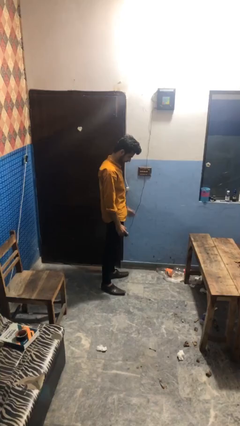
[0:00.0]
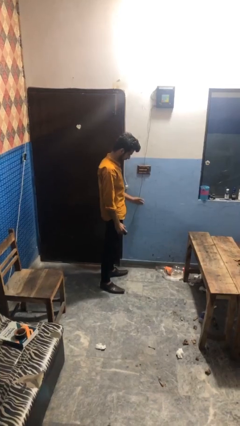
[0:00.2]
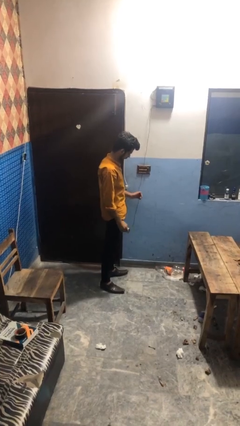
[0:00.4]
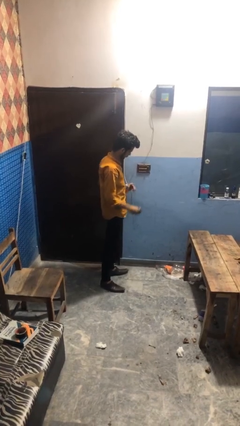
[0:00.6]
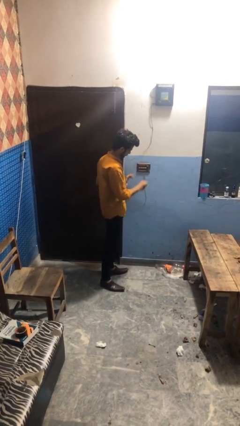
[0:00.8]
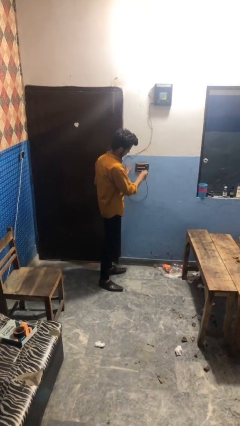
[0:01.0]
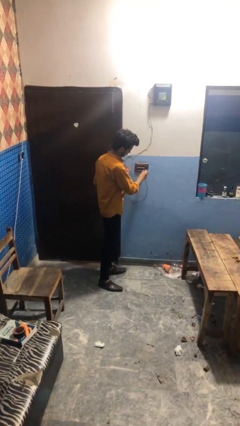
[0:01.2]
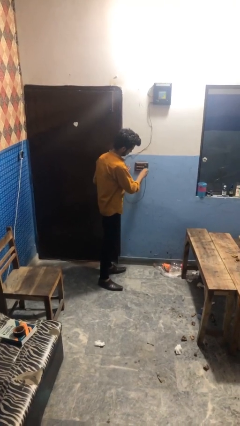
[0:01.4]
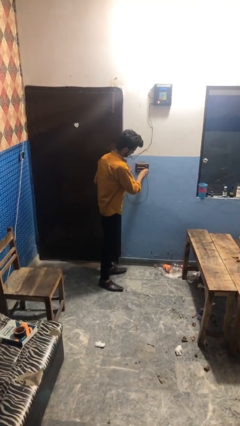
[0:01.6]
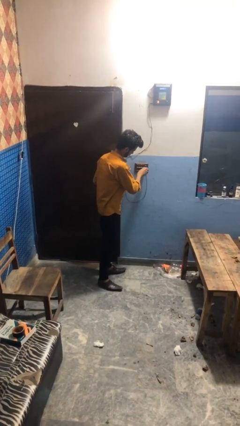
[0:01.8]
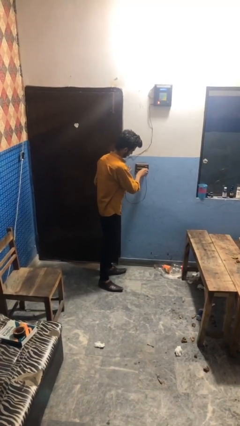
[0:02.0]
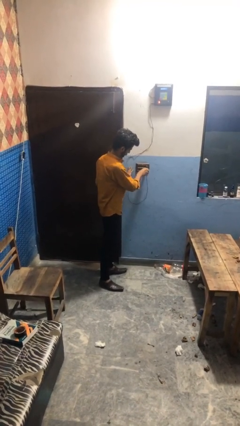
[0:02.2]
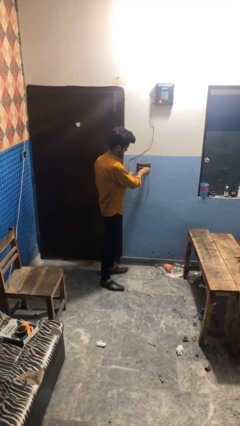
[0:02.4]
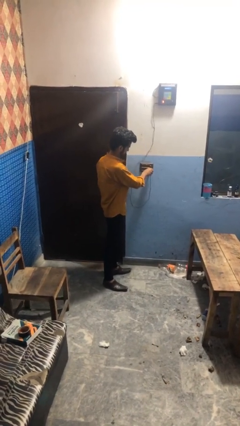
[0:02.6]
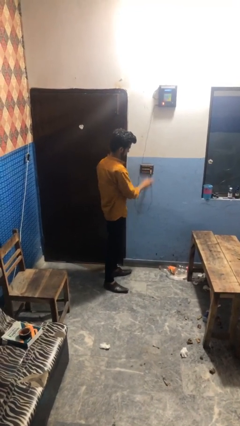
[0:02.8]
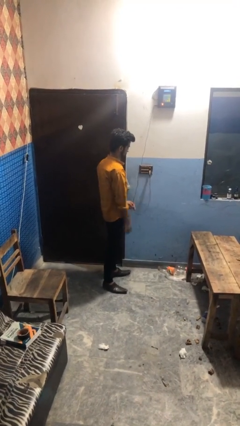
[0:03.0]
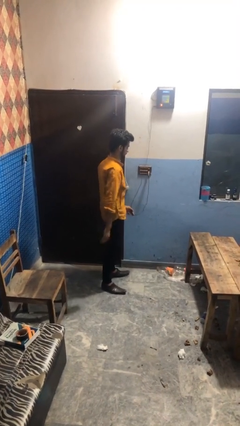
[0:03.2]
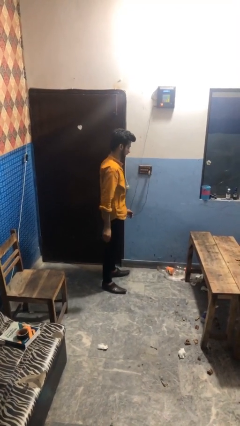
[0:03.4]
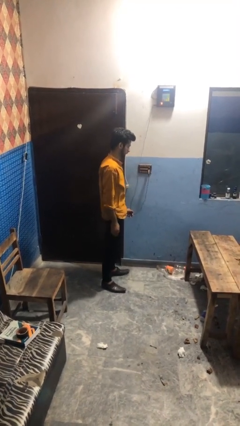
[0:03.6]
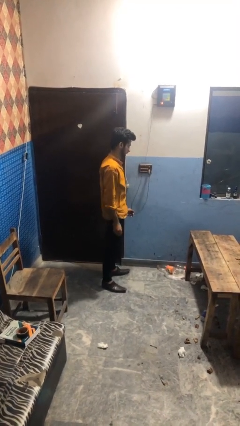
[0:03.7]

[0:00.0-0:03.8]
person plugs into electrical socket

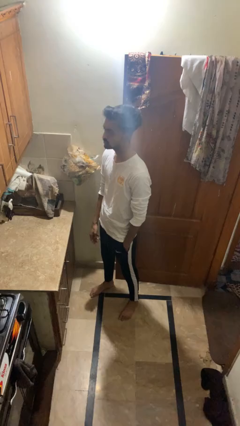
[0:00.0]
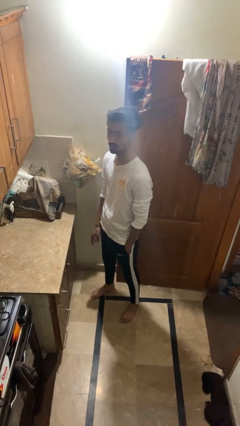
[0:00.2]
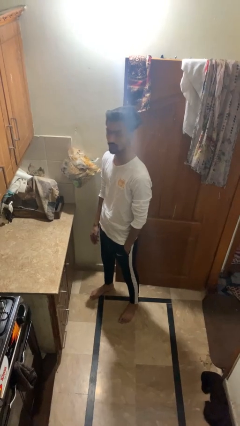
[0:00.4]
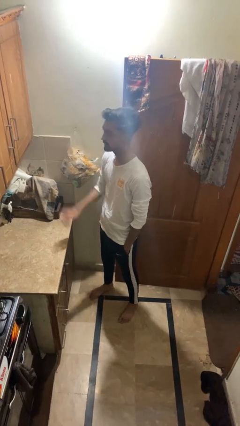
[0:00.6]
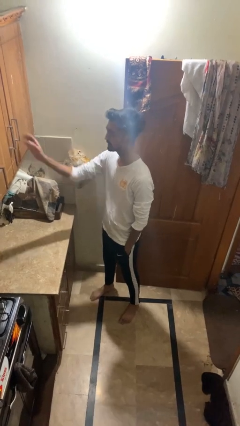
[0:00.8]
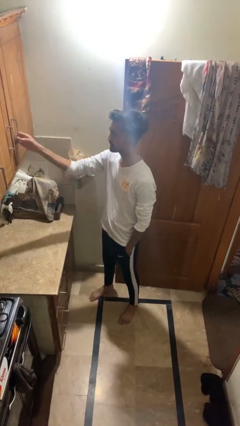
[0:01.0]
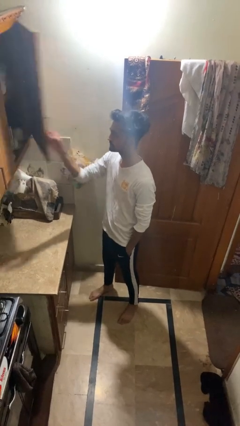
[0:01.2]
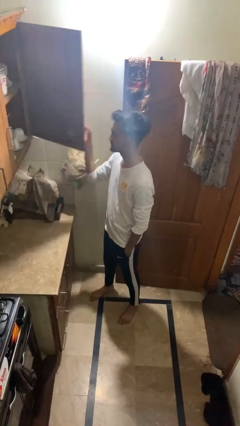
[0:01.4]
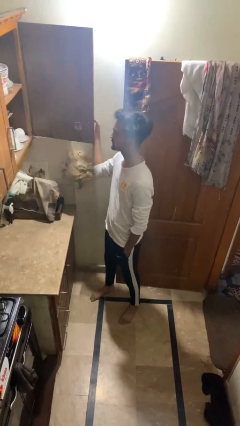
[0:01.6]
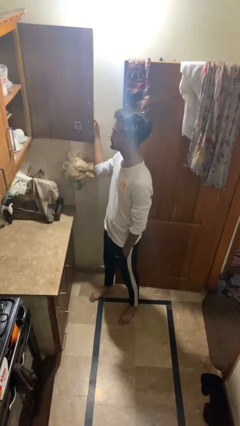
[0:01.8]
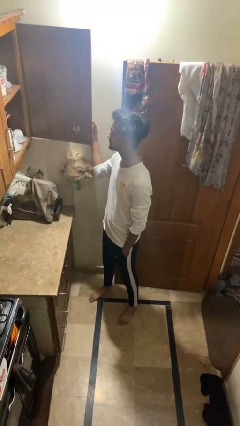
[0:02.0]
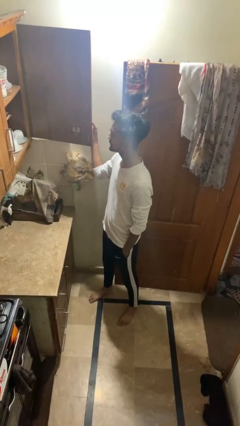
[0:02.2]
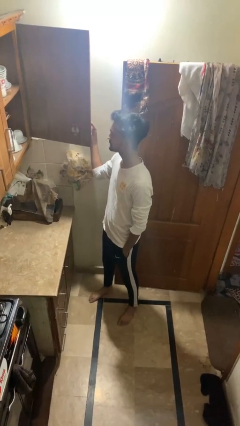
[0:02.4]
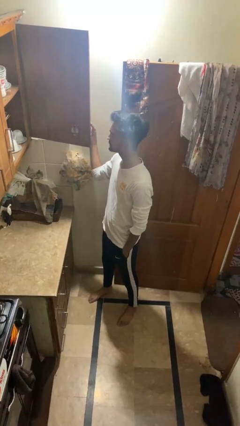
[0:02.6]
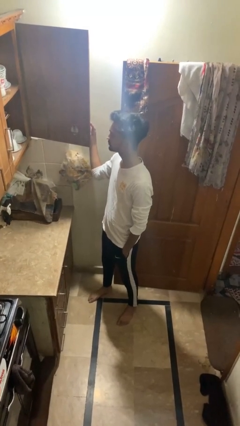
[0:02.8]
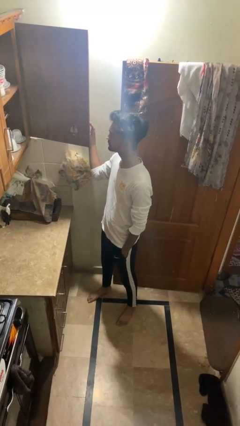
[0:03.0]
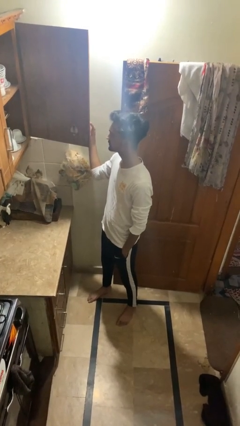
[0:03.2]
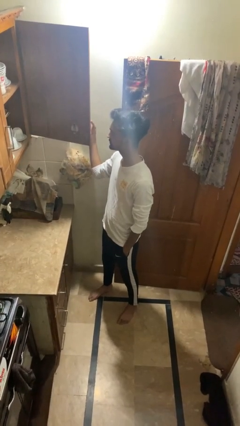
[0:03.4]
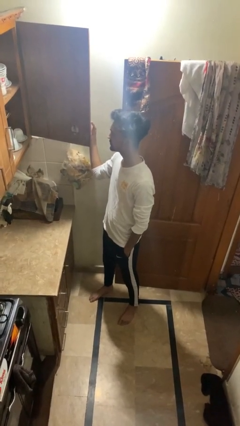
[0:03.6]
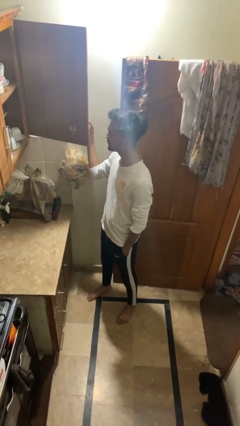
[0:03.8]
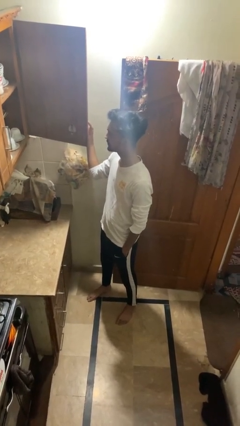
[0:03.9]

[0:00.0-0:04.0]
person opens cabinet

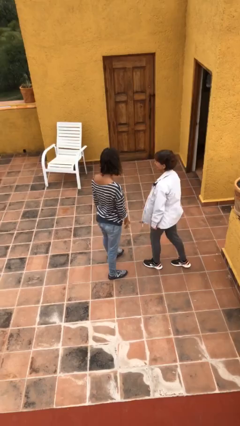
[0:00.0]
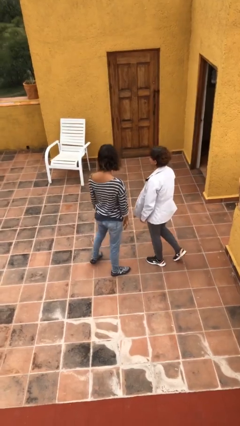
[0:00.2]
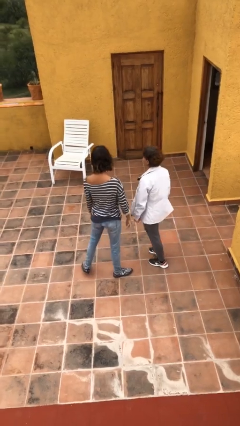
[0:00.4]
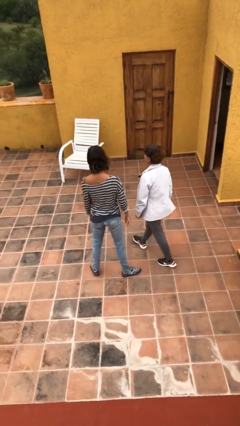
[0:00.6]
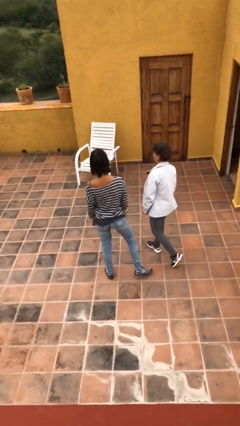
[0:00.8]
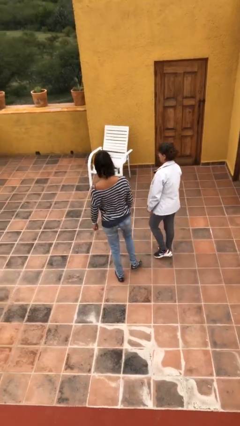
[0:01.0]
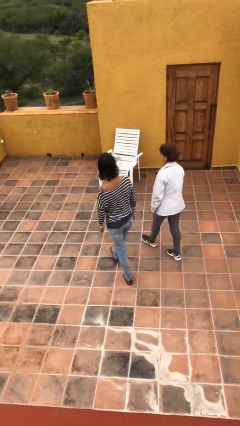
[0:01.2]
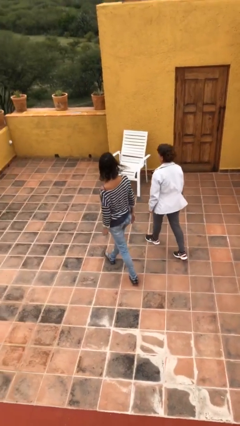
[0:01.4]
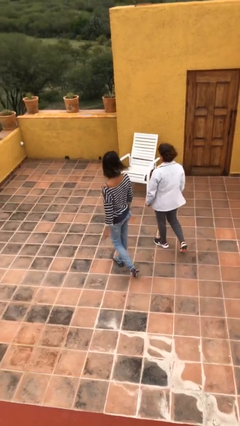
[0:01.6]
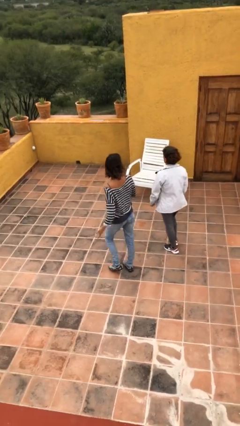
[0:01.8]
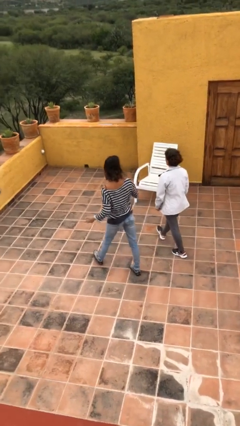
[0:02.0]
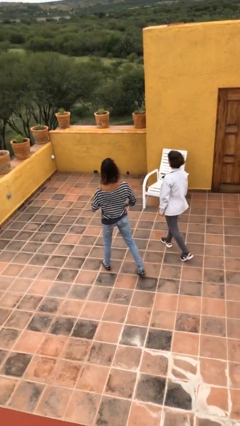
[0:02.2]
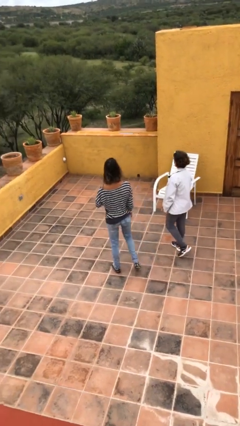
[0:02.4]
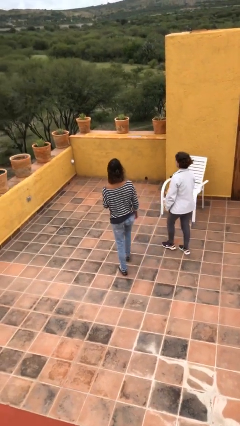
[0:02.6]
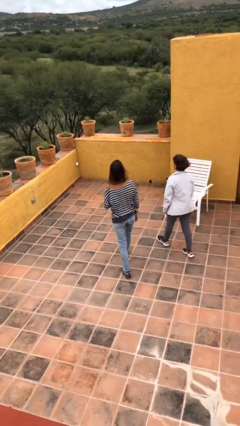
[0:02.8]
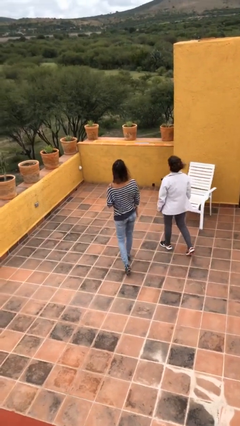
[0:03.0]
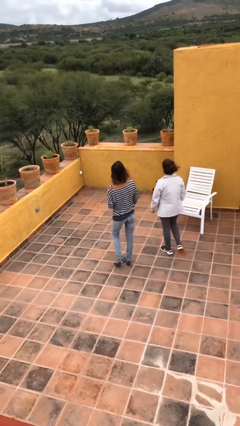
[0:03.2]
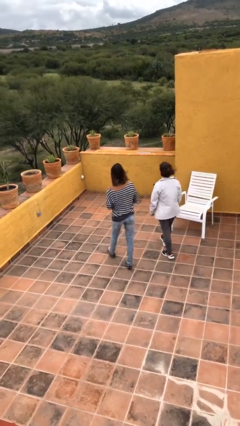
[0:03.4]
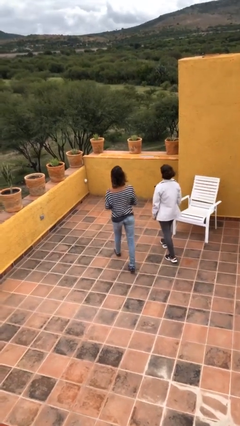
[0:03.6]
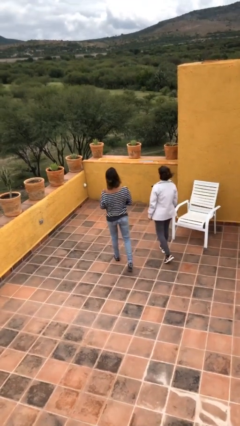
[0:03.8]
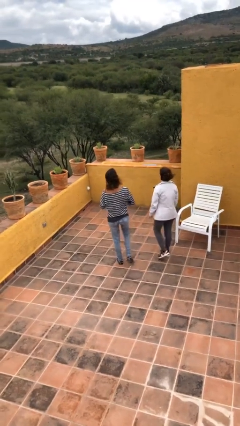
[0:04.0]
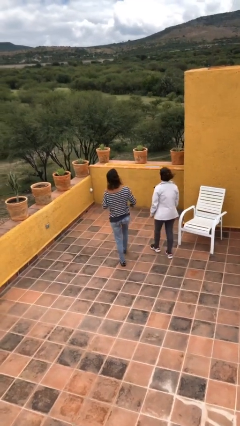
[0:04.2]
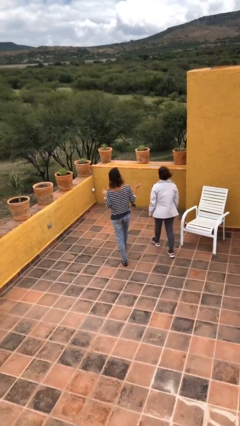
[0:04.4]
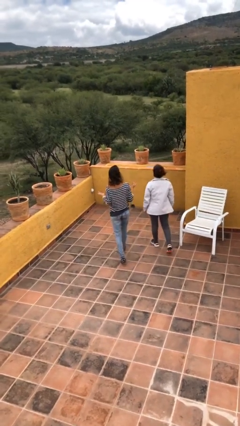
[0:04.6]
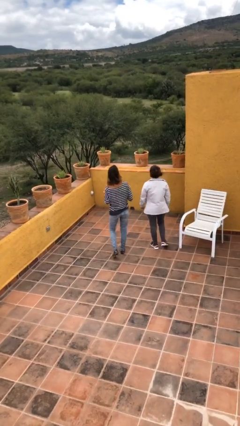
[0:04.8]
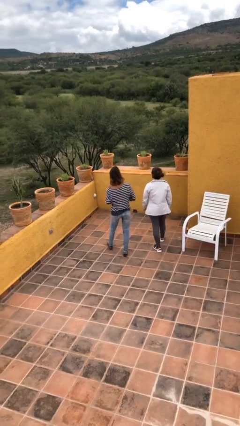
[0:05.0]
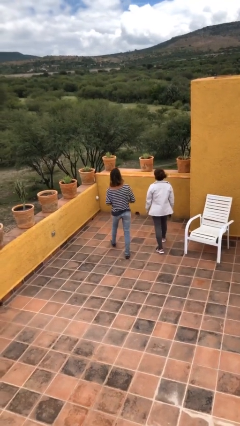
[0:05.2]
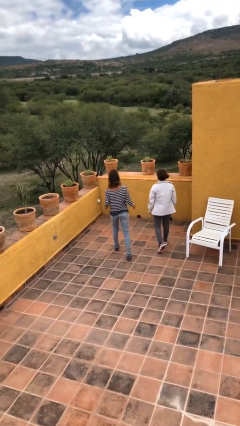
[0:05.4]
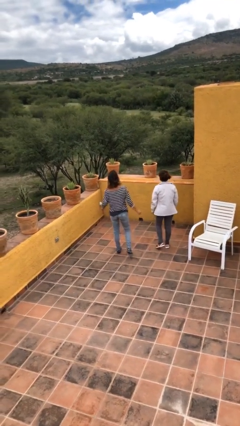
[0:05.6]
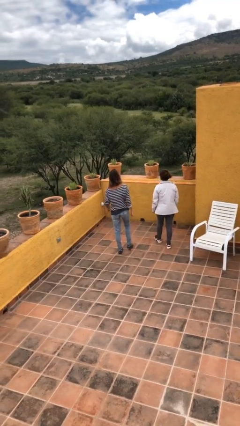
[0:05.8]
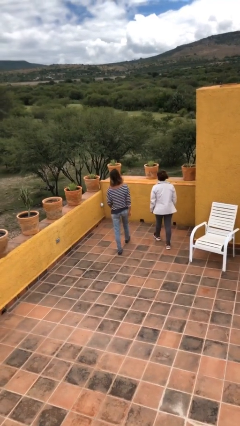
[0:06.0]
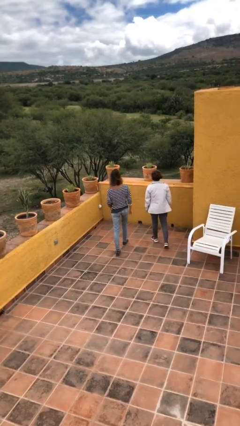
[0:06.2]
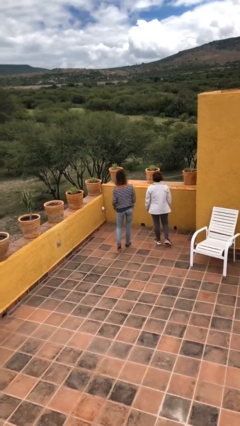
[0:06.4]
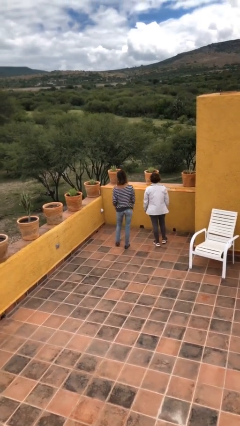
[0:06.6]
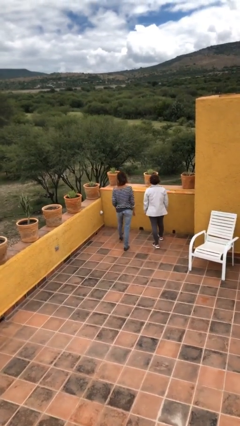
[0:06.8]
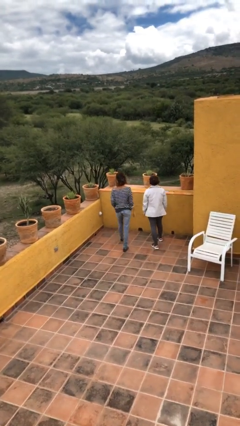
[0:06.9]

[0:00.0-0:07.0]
person talks to person

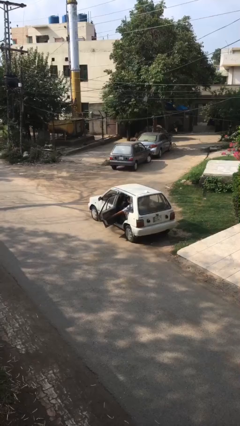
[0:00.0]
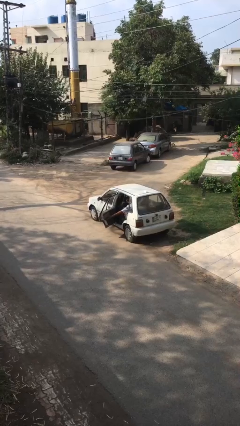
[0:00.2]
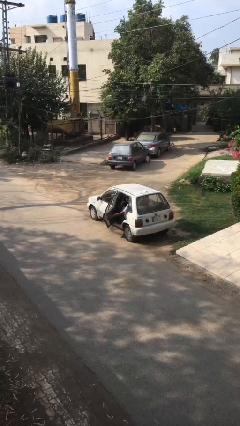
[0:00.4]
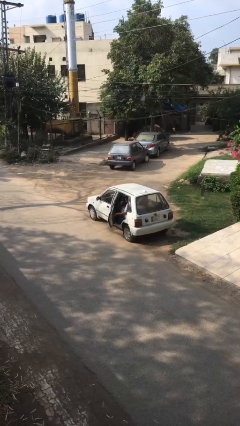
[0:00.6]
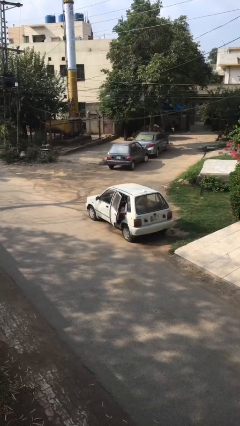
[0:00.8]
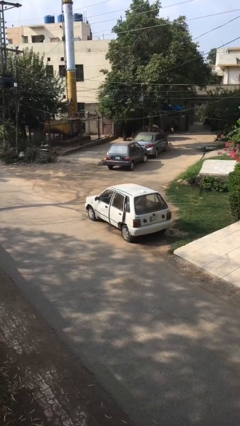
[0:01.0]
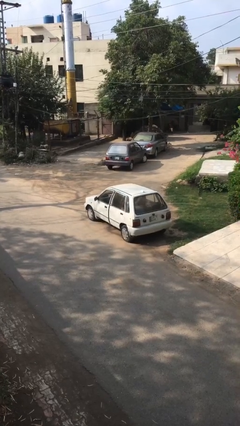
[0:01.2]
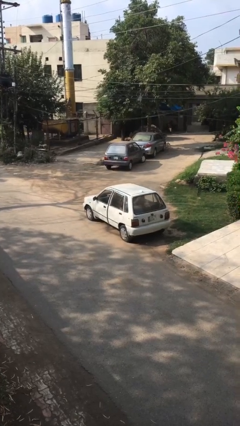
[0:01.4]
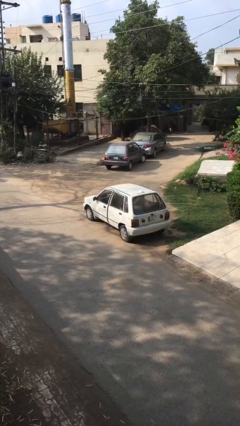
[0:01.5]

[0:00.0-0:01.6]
person closes car door

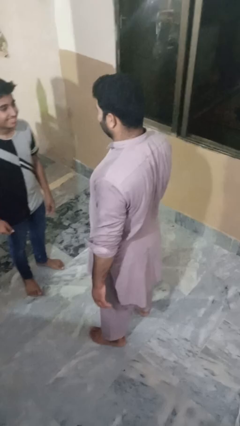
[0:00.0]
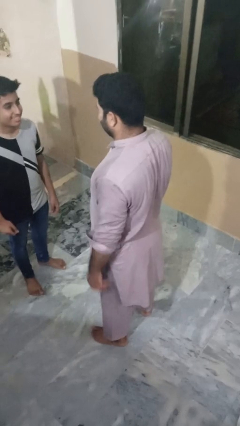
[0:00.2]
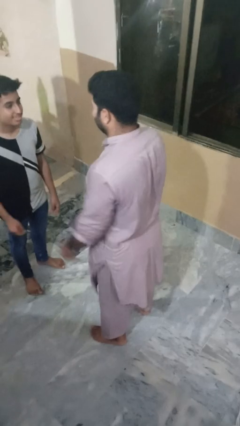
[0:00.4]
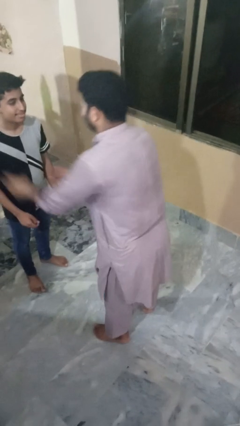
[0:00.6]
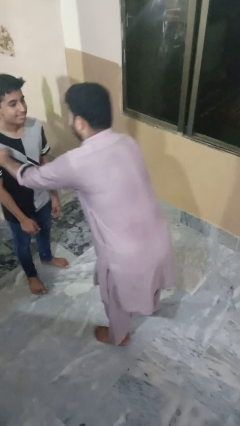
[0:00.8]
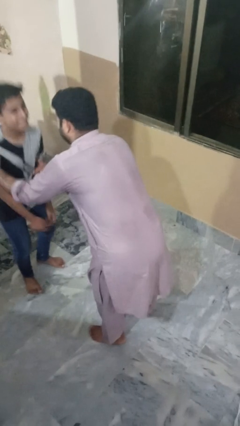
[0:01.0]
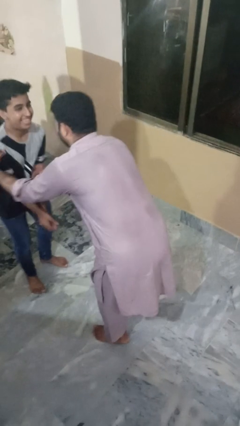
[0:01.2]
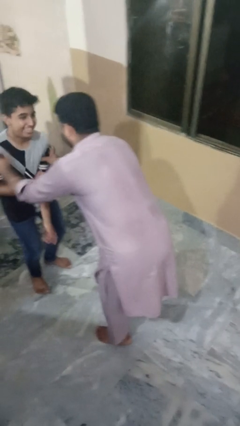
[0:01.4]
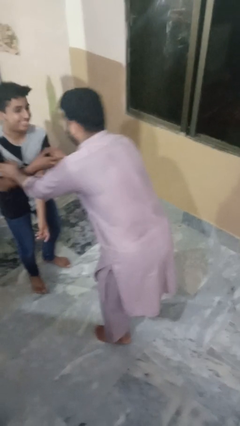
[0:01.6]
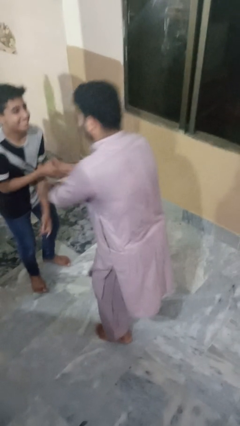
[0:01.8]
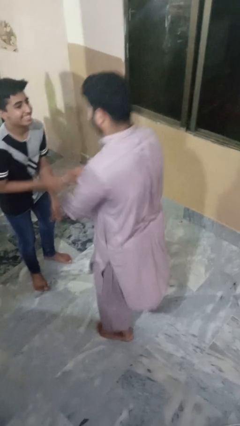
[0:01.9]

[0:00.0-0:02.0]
person tickles person
